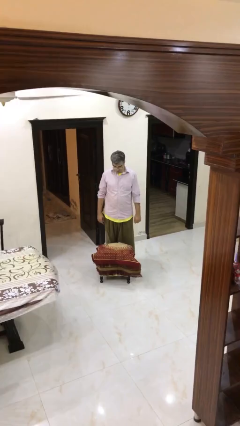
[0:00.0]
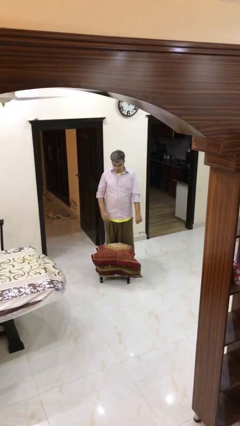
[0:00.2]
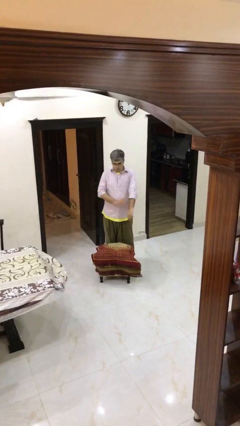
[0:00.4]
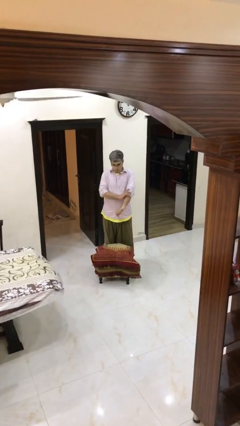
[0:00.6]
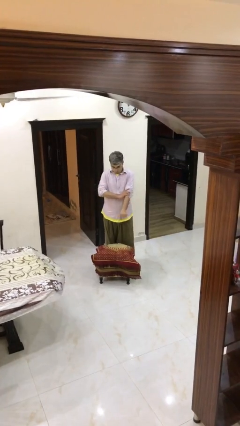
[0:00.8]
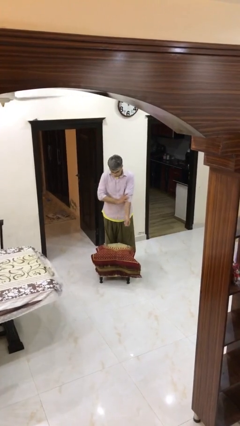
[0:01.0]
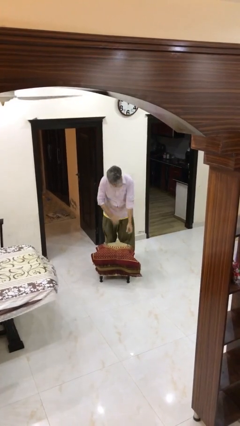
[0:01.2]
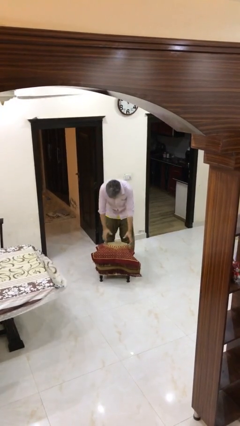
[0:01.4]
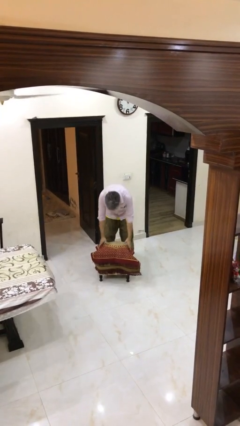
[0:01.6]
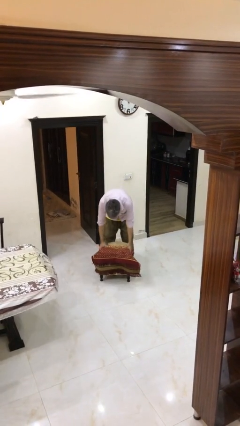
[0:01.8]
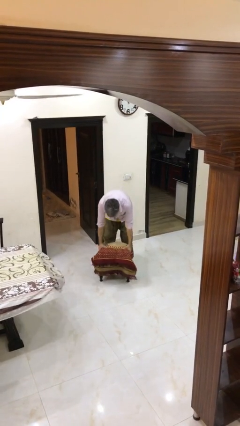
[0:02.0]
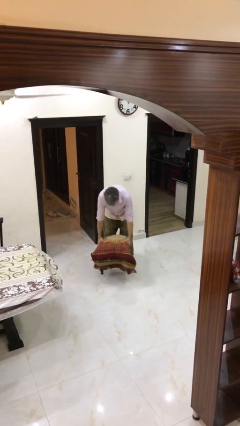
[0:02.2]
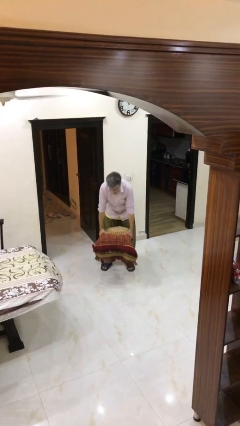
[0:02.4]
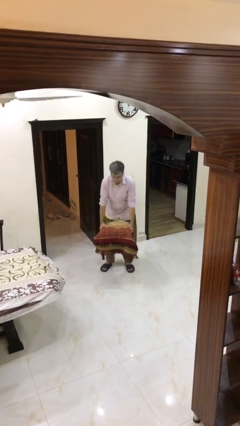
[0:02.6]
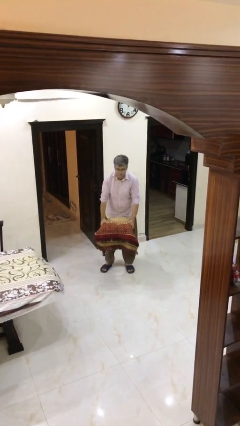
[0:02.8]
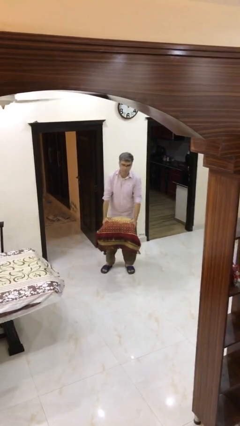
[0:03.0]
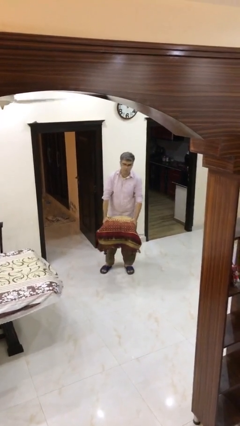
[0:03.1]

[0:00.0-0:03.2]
person picks up object from floor

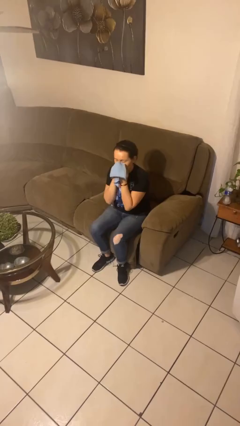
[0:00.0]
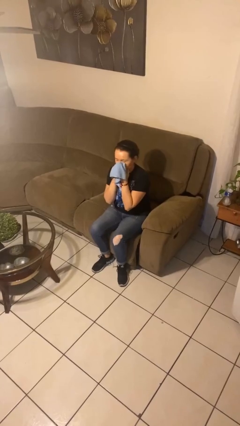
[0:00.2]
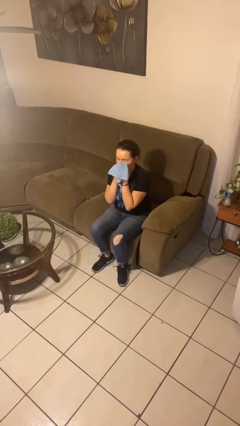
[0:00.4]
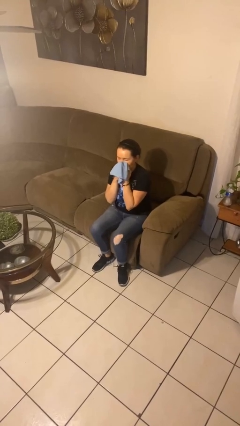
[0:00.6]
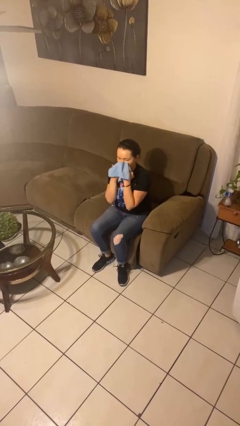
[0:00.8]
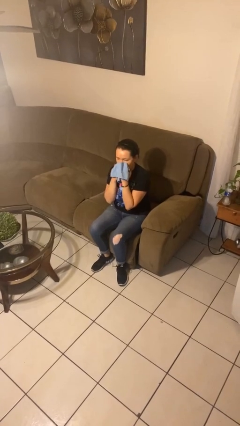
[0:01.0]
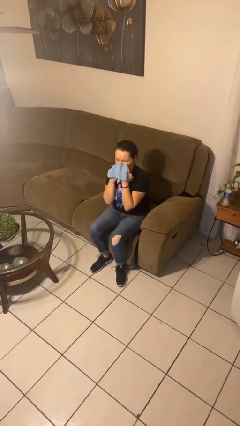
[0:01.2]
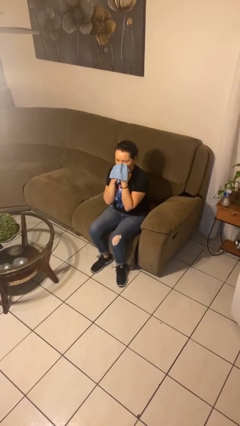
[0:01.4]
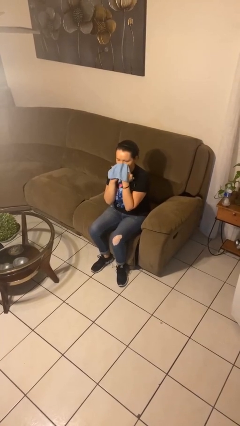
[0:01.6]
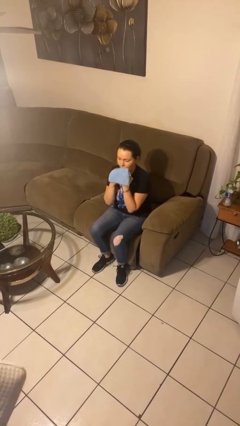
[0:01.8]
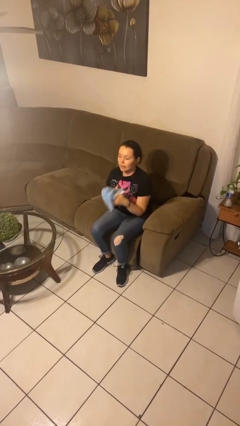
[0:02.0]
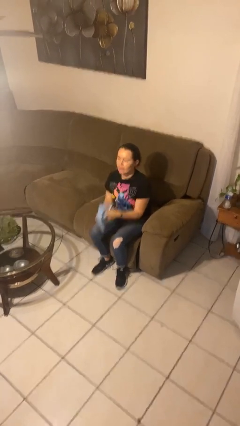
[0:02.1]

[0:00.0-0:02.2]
person blows nose

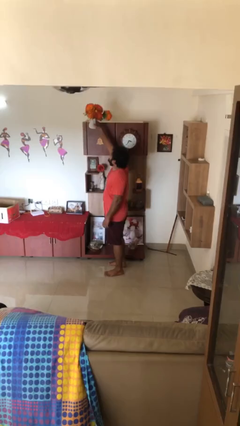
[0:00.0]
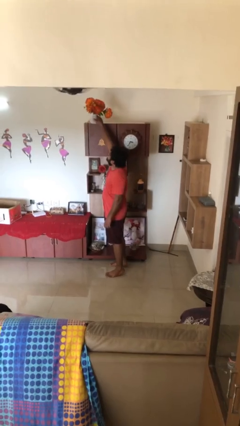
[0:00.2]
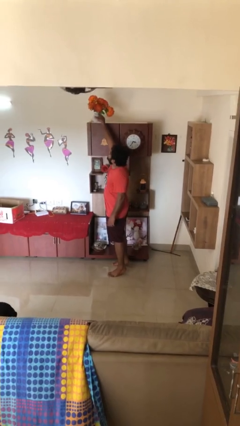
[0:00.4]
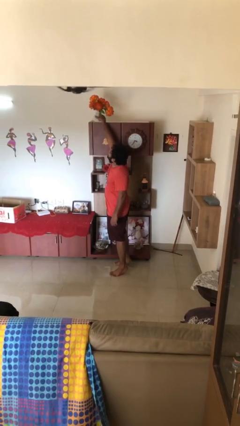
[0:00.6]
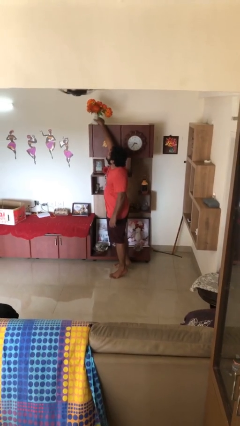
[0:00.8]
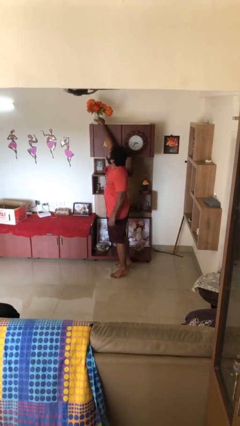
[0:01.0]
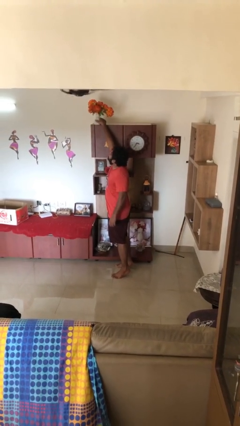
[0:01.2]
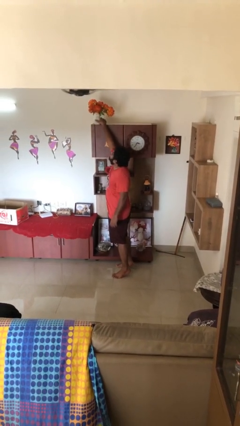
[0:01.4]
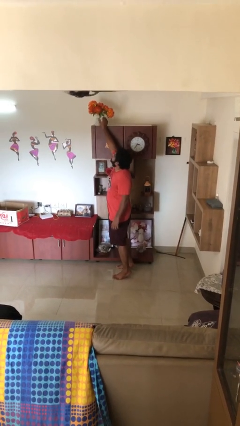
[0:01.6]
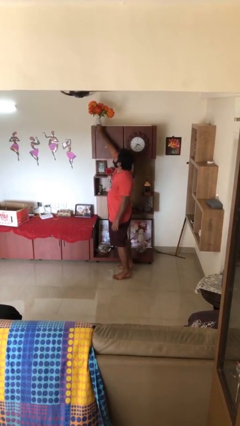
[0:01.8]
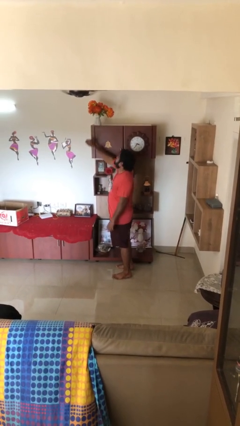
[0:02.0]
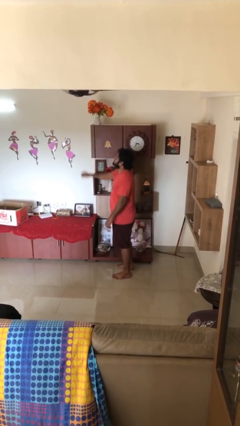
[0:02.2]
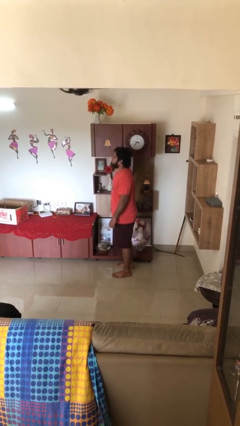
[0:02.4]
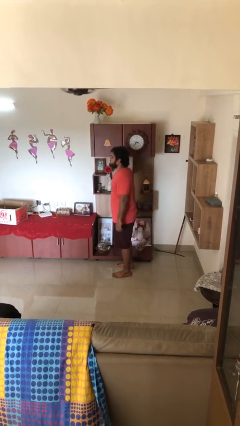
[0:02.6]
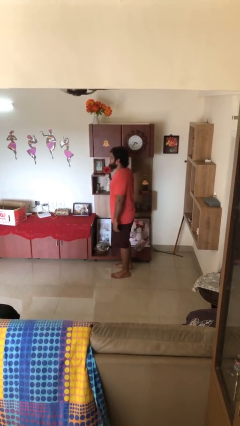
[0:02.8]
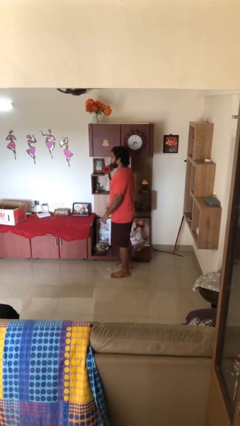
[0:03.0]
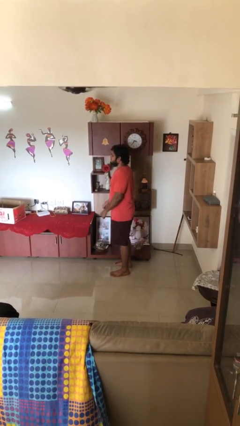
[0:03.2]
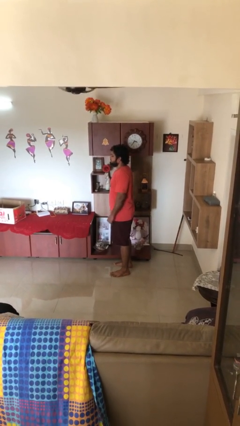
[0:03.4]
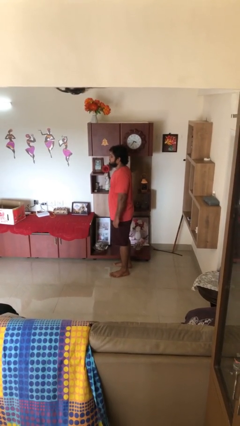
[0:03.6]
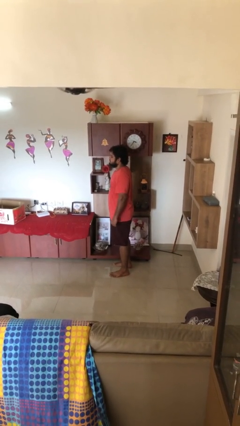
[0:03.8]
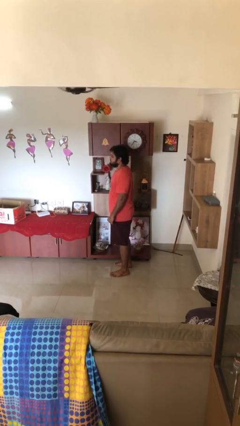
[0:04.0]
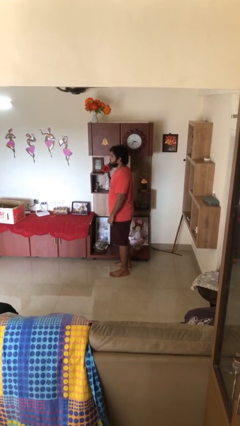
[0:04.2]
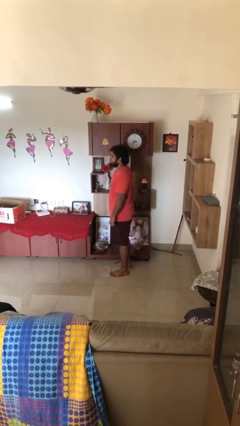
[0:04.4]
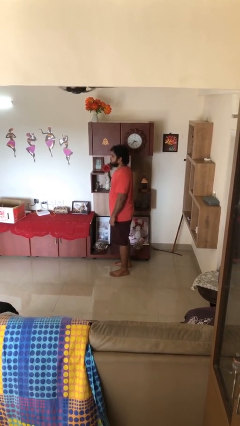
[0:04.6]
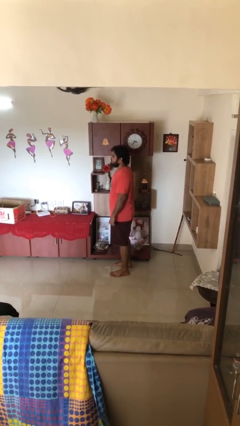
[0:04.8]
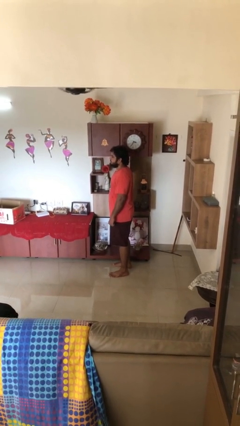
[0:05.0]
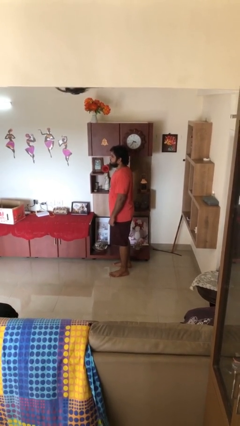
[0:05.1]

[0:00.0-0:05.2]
person puts down object on shelf

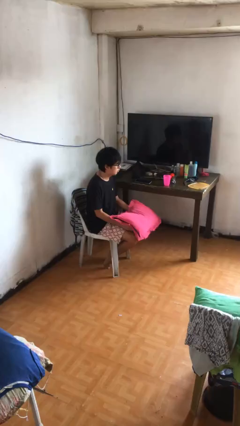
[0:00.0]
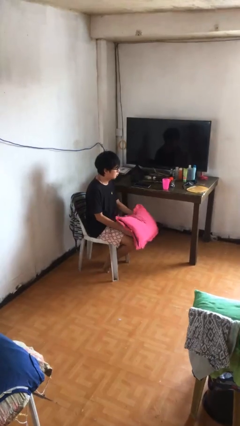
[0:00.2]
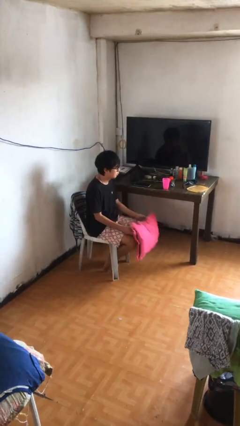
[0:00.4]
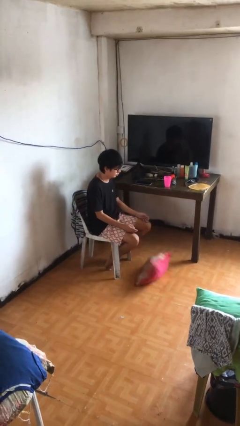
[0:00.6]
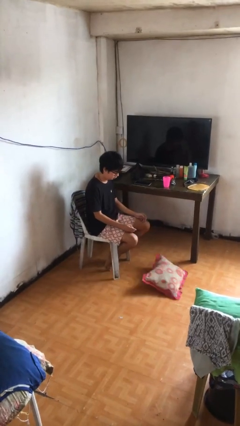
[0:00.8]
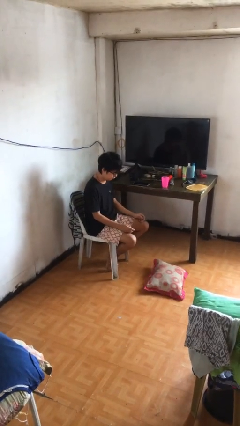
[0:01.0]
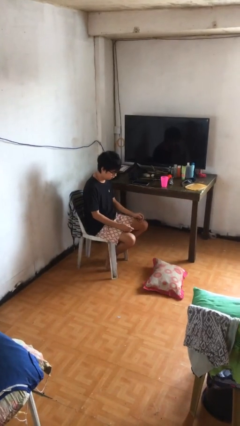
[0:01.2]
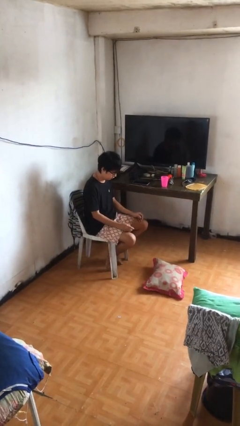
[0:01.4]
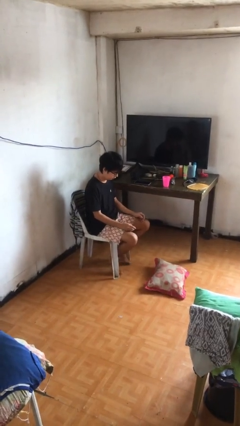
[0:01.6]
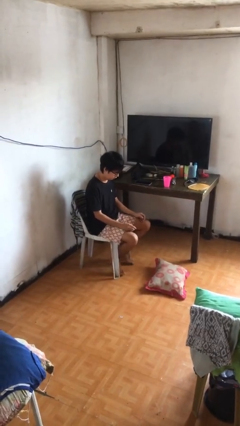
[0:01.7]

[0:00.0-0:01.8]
person drops object

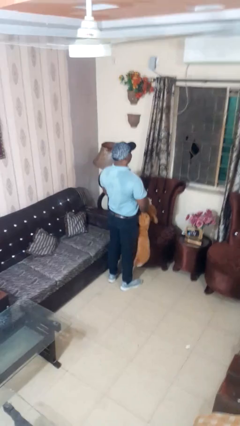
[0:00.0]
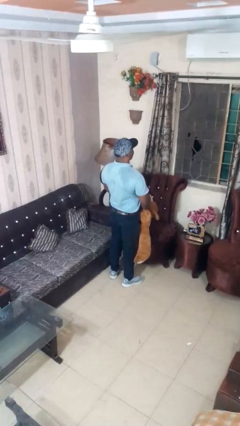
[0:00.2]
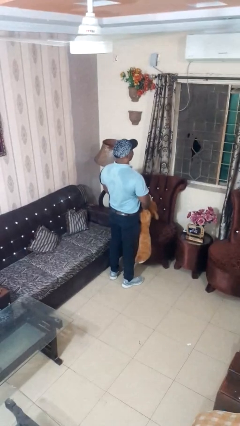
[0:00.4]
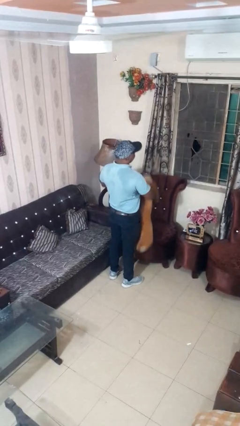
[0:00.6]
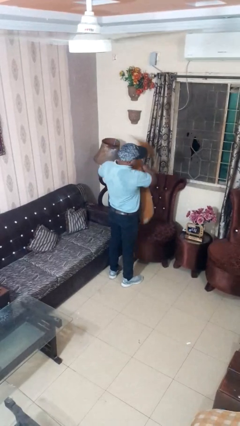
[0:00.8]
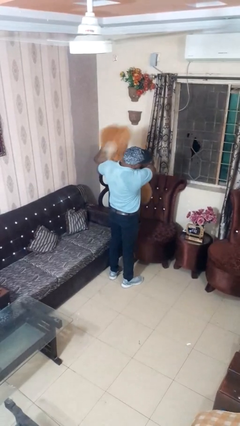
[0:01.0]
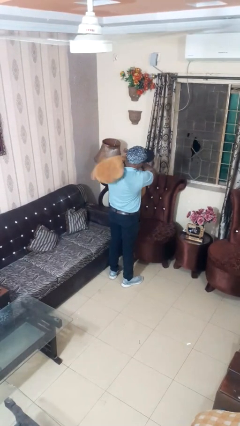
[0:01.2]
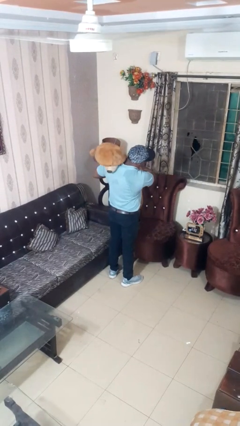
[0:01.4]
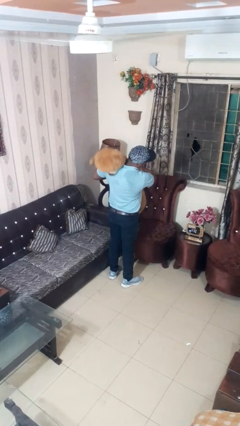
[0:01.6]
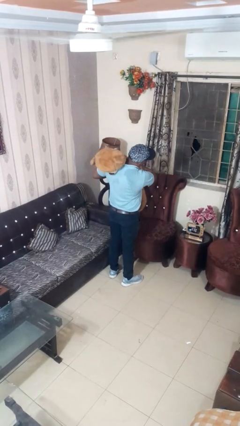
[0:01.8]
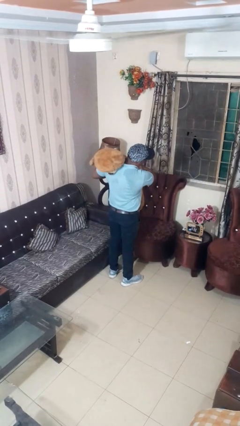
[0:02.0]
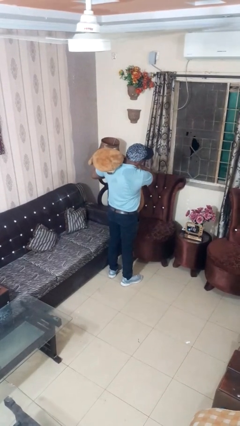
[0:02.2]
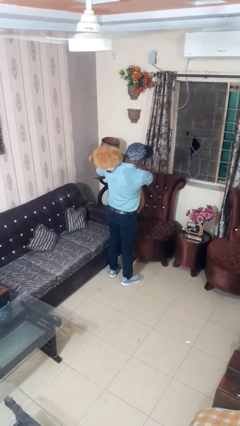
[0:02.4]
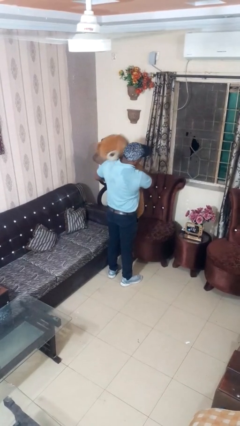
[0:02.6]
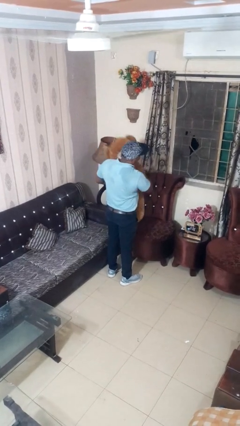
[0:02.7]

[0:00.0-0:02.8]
person hugs stuffed animal

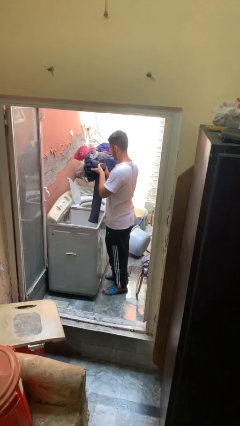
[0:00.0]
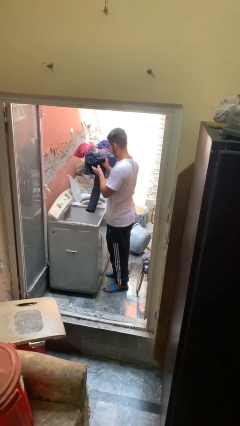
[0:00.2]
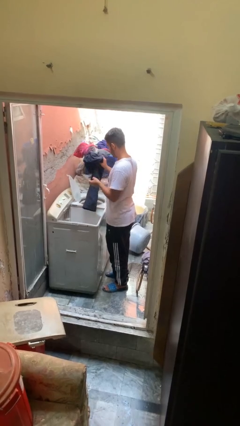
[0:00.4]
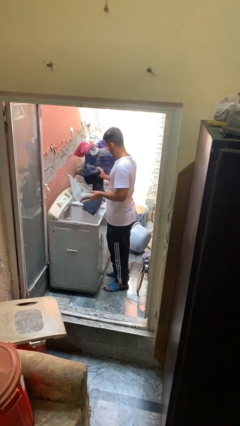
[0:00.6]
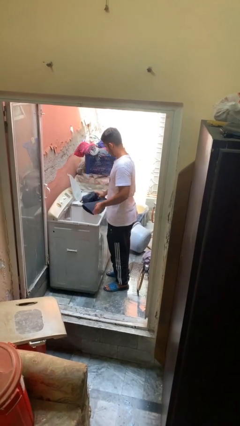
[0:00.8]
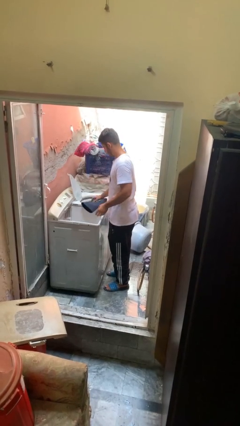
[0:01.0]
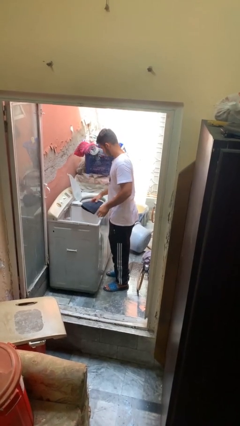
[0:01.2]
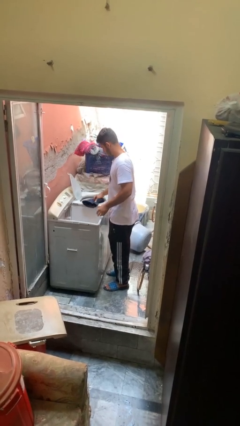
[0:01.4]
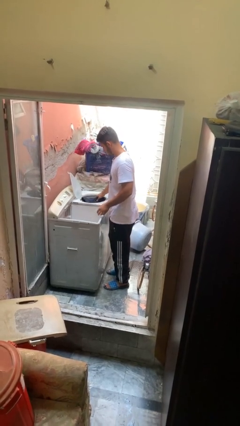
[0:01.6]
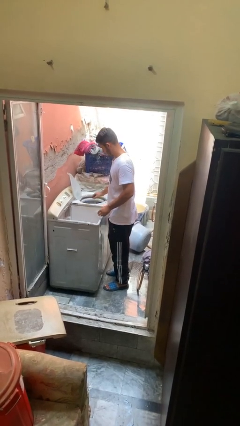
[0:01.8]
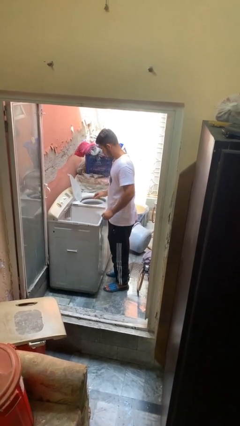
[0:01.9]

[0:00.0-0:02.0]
person loads dryer
